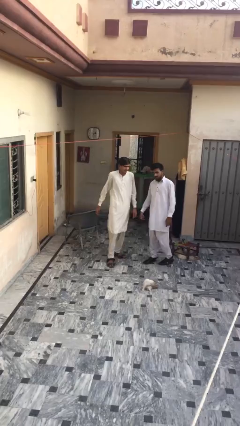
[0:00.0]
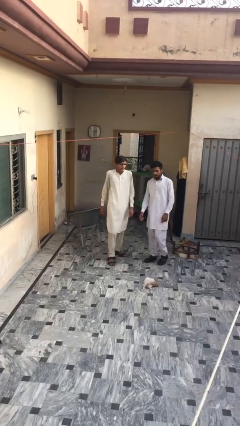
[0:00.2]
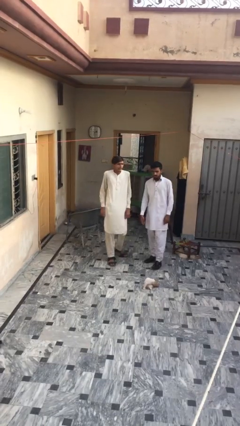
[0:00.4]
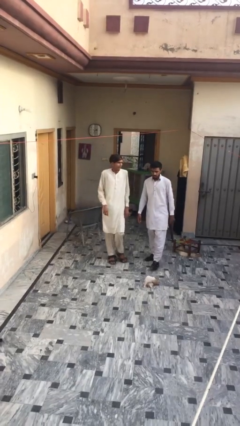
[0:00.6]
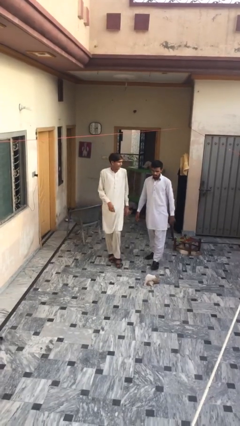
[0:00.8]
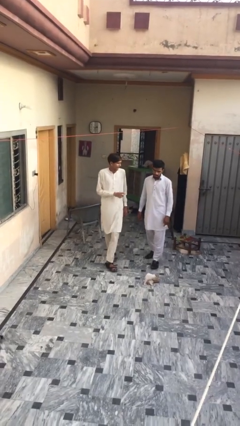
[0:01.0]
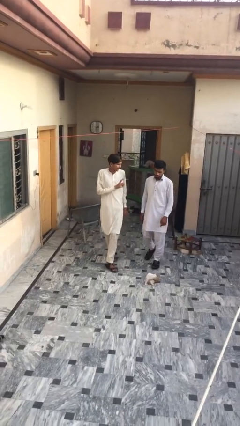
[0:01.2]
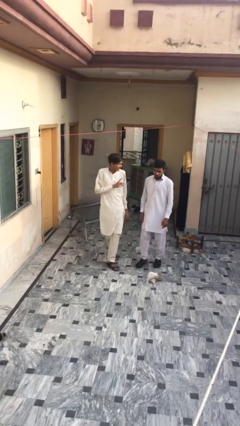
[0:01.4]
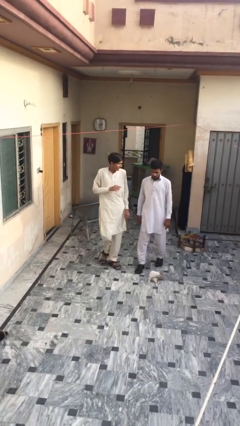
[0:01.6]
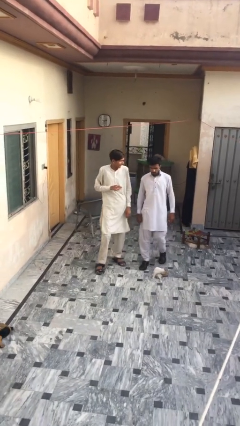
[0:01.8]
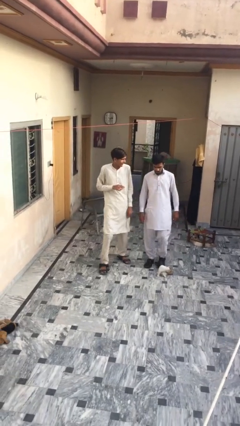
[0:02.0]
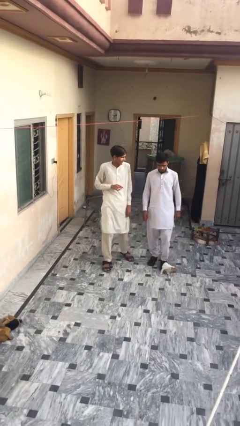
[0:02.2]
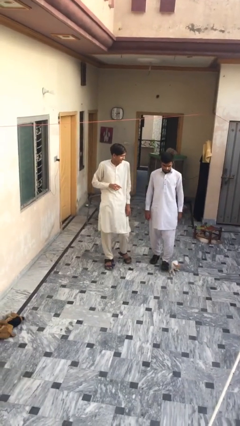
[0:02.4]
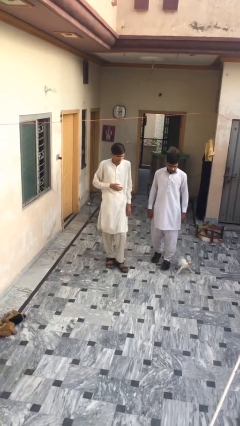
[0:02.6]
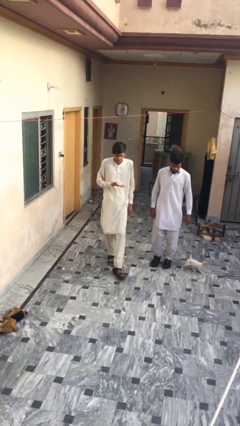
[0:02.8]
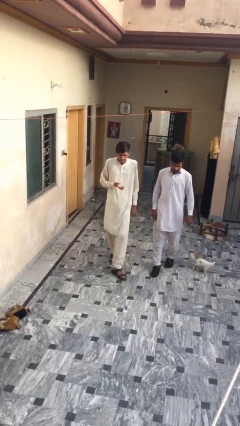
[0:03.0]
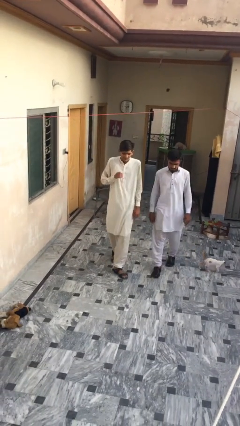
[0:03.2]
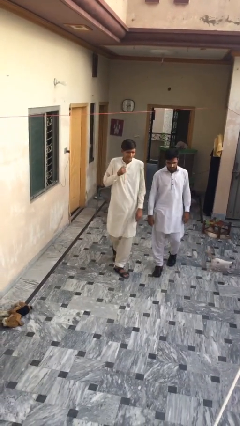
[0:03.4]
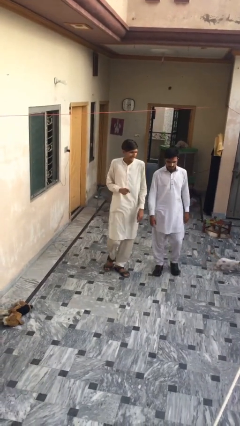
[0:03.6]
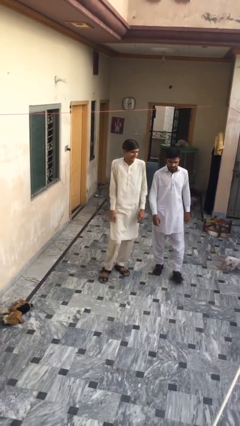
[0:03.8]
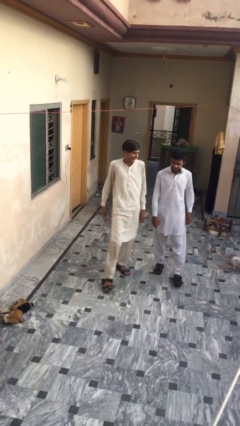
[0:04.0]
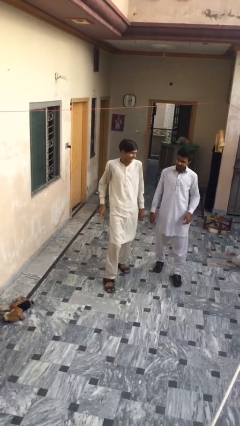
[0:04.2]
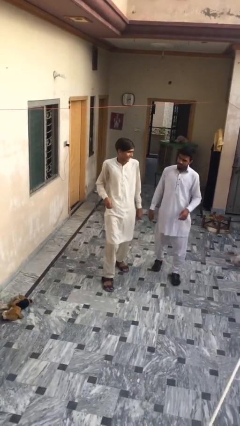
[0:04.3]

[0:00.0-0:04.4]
person talks to person

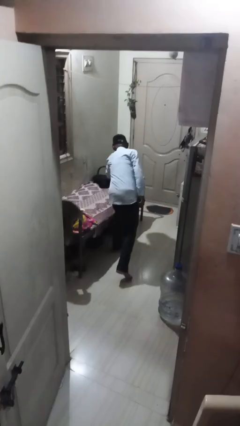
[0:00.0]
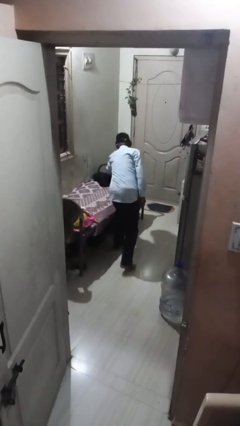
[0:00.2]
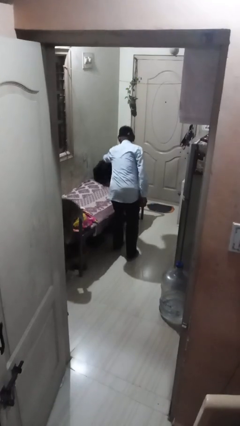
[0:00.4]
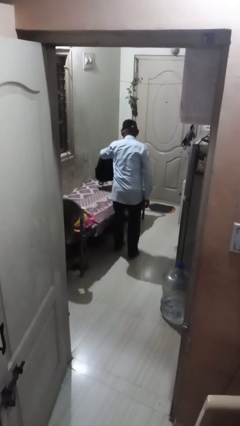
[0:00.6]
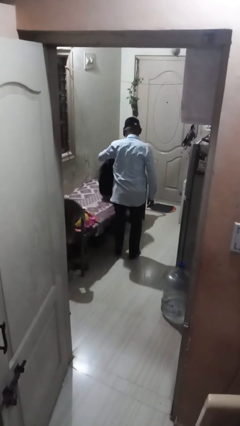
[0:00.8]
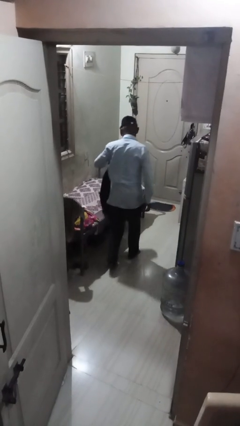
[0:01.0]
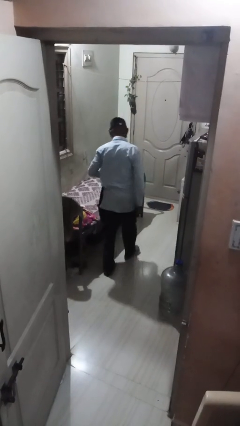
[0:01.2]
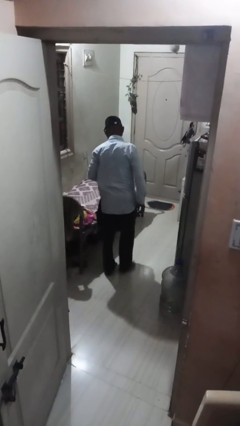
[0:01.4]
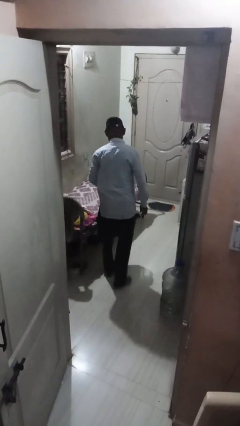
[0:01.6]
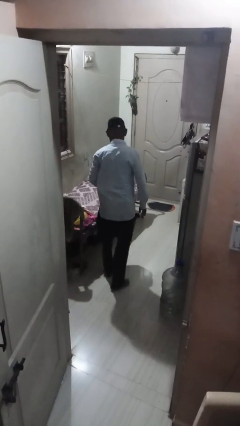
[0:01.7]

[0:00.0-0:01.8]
person picks up object from bed

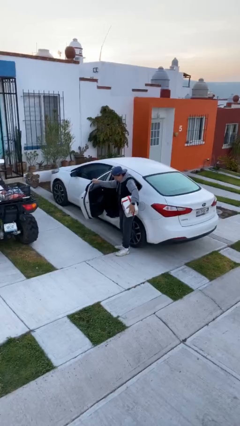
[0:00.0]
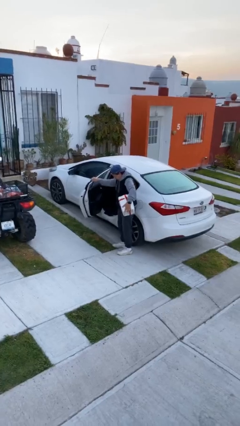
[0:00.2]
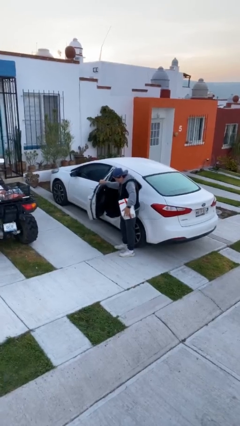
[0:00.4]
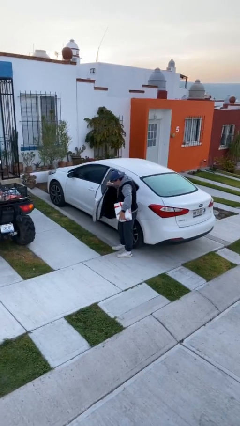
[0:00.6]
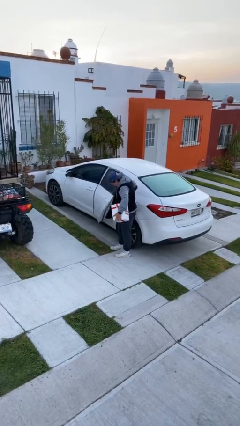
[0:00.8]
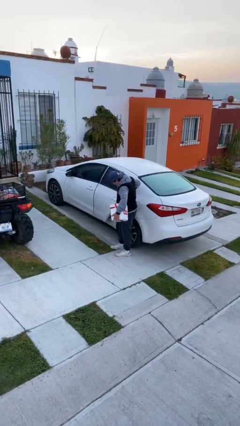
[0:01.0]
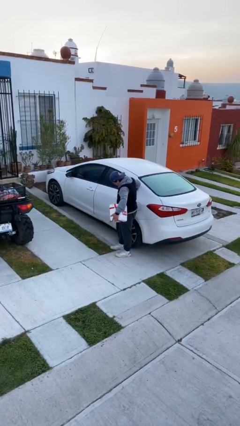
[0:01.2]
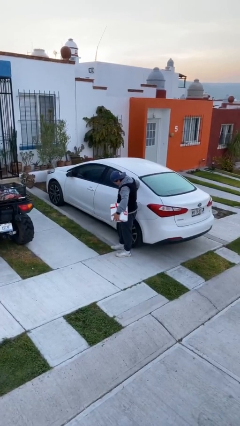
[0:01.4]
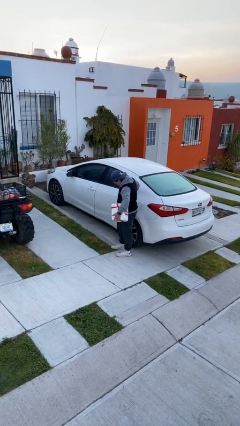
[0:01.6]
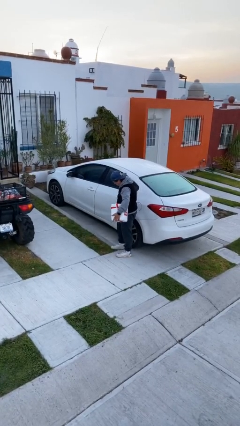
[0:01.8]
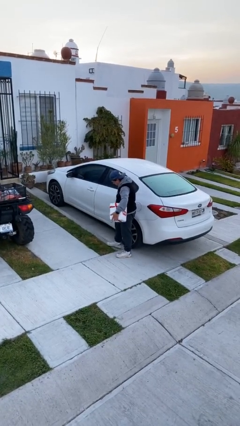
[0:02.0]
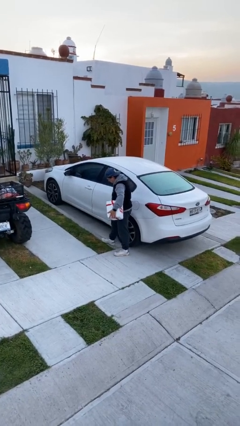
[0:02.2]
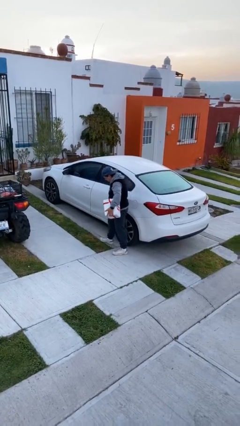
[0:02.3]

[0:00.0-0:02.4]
person closes car door

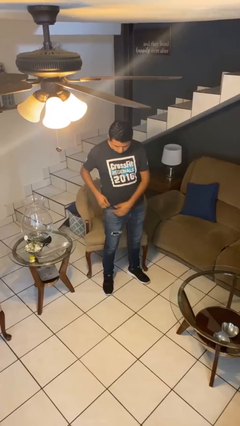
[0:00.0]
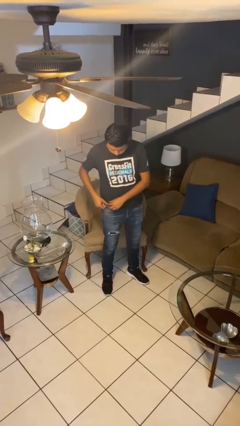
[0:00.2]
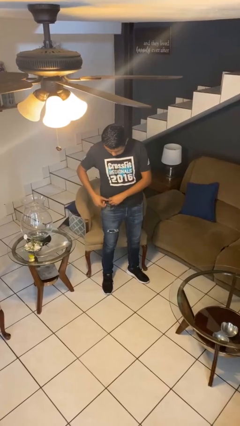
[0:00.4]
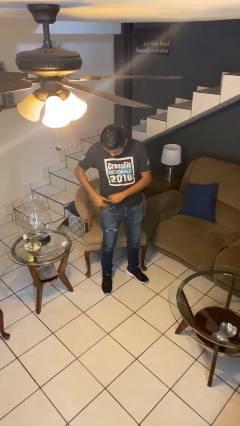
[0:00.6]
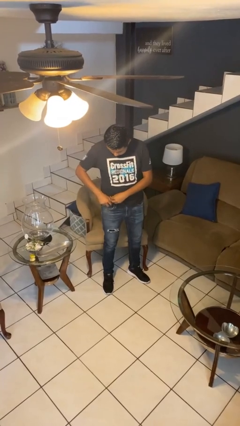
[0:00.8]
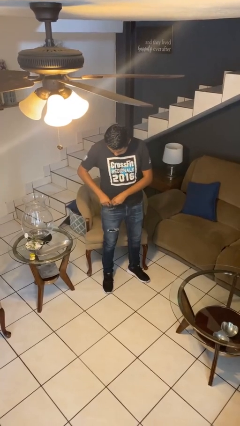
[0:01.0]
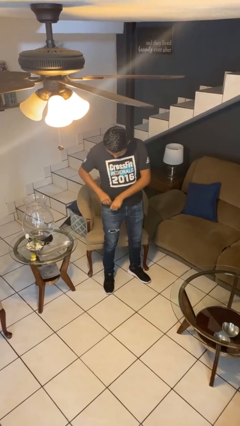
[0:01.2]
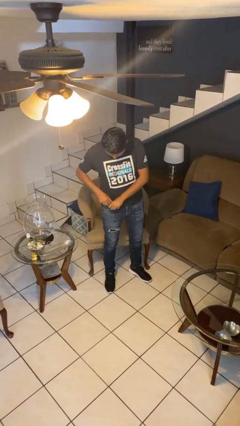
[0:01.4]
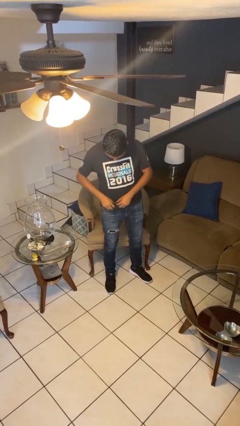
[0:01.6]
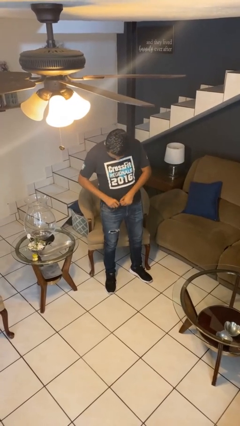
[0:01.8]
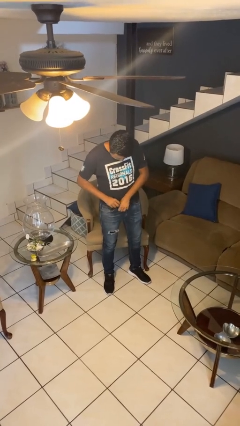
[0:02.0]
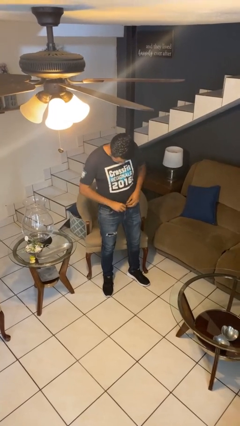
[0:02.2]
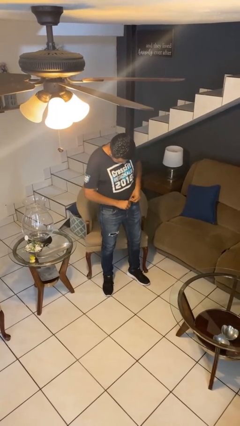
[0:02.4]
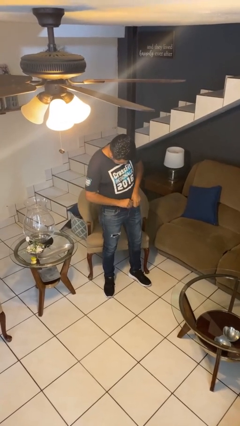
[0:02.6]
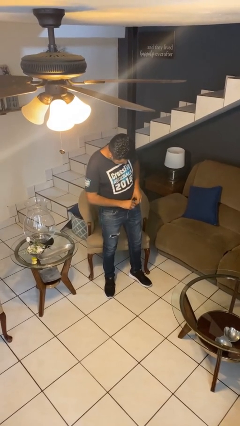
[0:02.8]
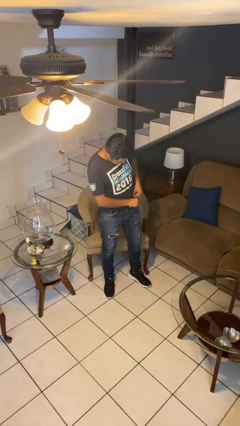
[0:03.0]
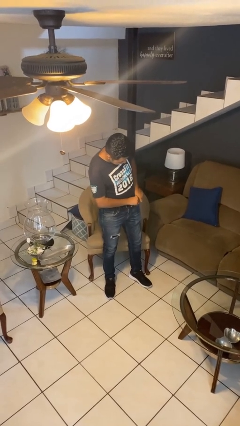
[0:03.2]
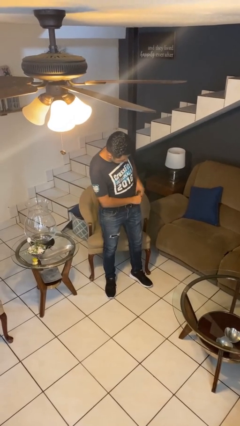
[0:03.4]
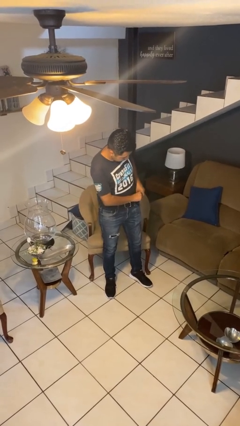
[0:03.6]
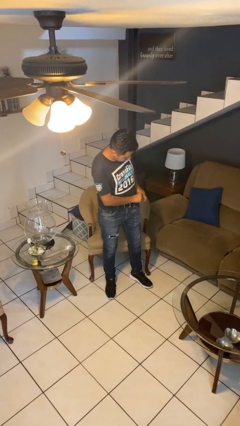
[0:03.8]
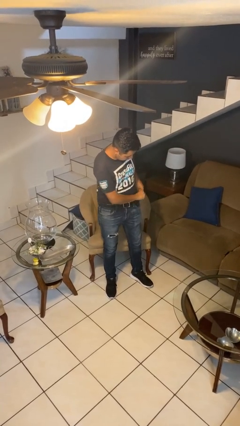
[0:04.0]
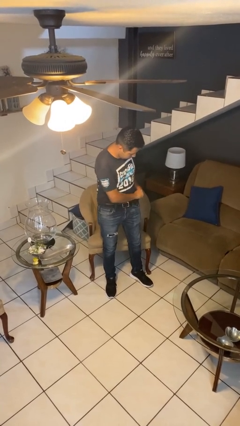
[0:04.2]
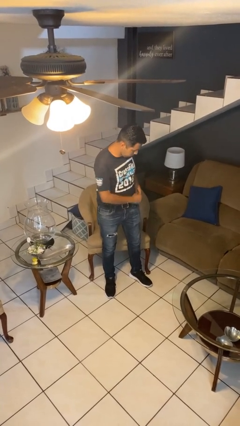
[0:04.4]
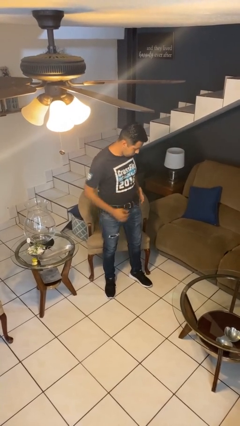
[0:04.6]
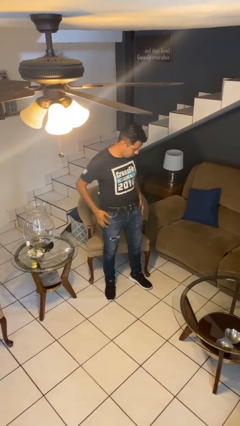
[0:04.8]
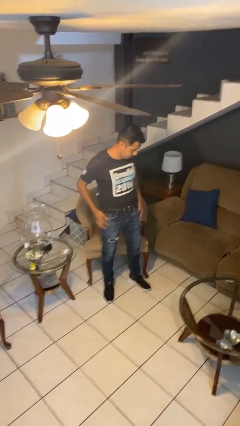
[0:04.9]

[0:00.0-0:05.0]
person tucks in shirt

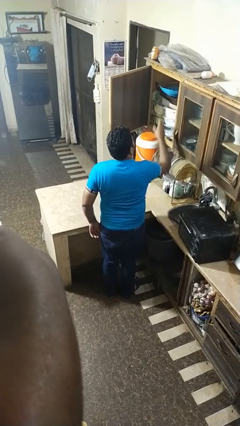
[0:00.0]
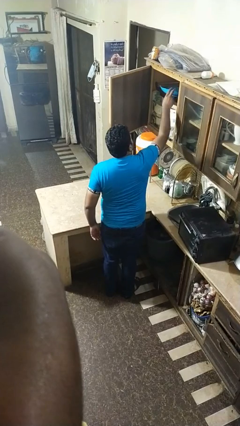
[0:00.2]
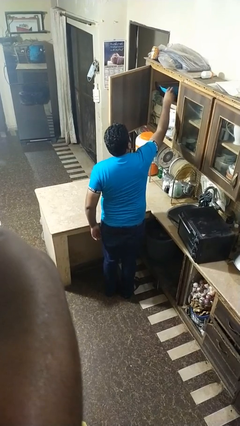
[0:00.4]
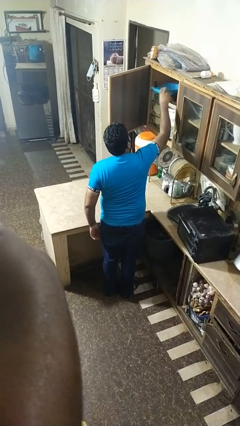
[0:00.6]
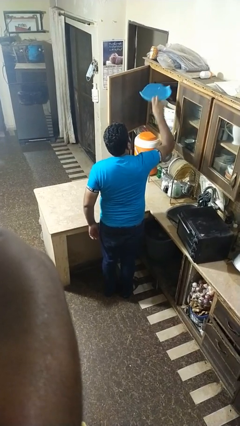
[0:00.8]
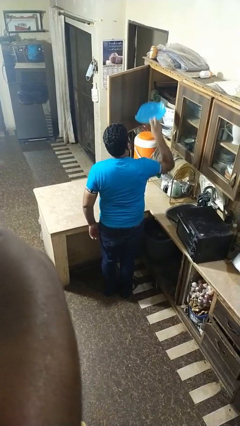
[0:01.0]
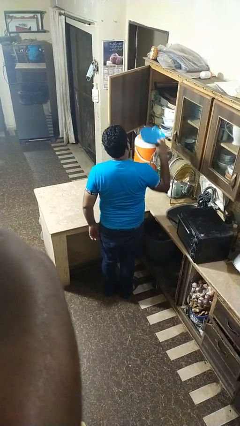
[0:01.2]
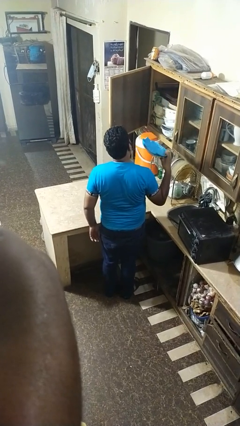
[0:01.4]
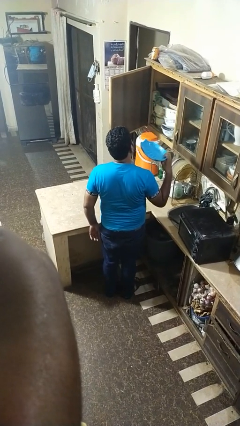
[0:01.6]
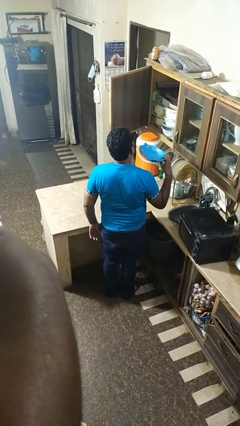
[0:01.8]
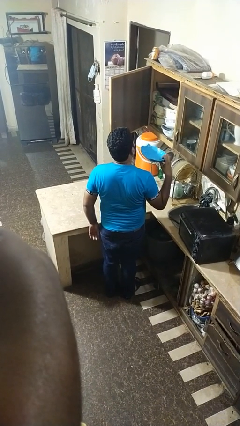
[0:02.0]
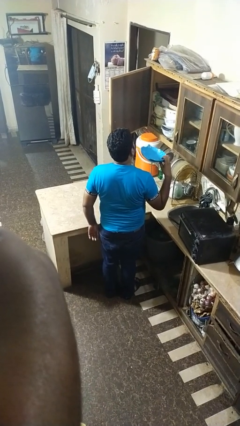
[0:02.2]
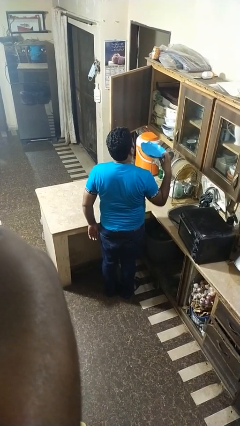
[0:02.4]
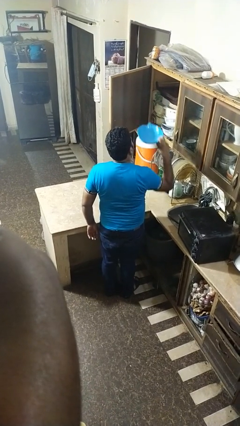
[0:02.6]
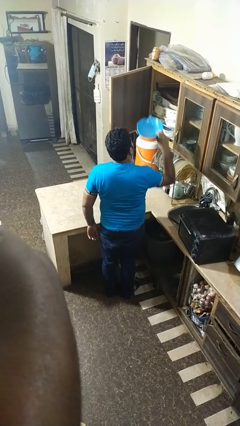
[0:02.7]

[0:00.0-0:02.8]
person puts object in cabinet

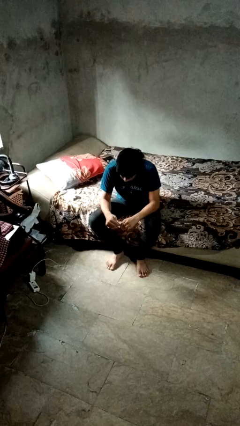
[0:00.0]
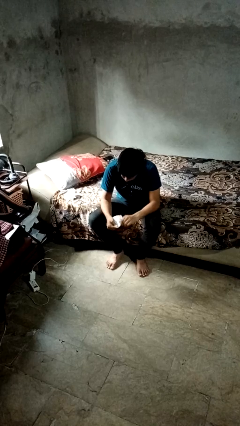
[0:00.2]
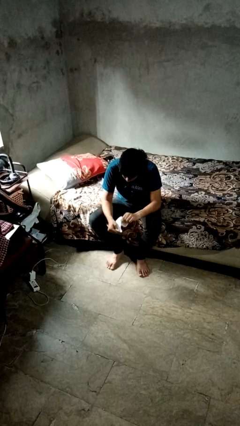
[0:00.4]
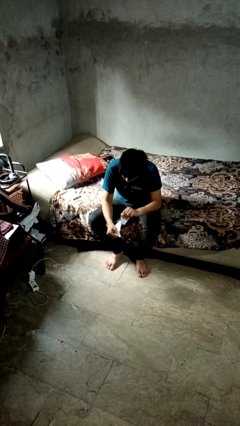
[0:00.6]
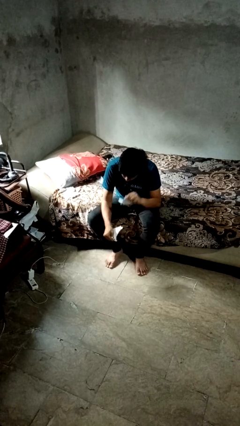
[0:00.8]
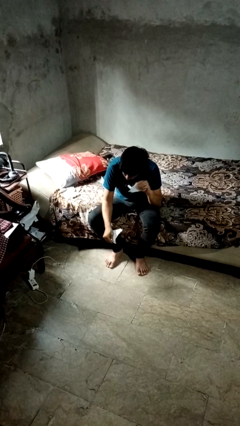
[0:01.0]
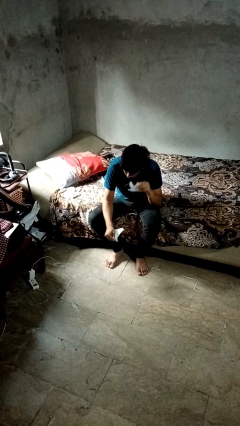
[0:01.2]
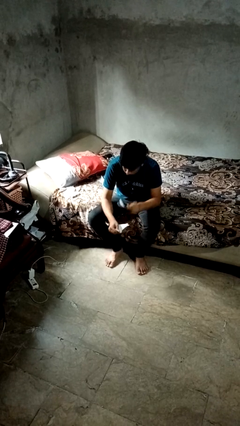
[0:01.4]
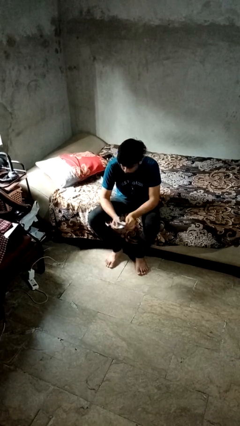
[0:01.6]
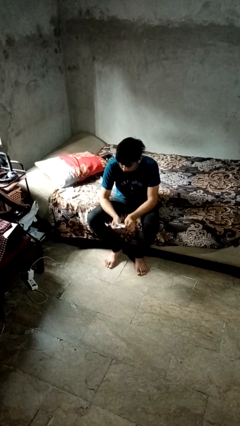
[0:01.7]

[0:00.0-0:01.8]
person tears paper
